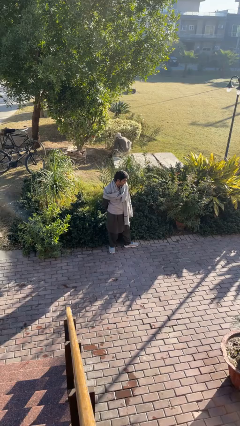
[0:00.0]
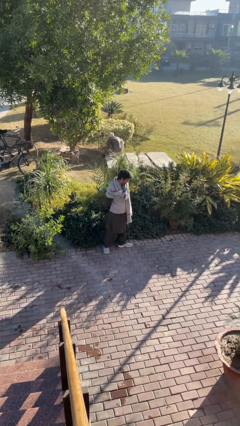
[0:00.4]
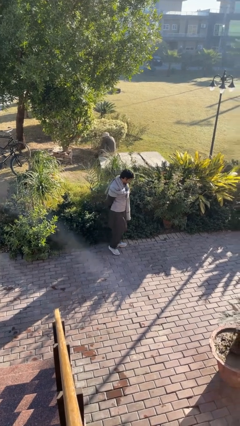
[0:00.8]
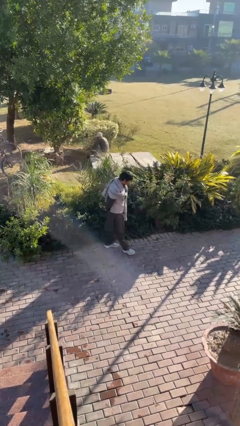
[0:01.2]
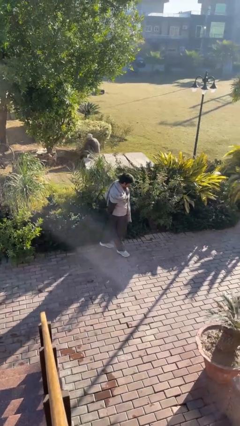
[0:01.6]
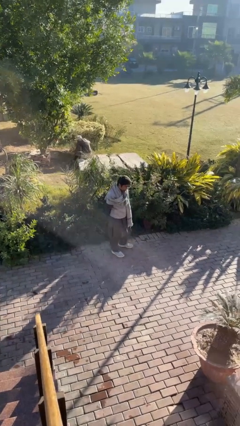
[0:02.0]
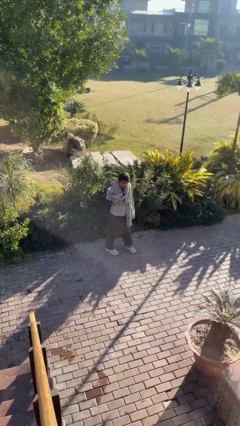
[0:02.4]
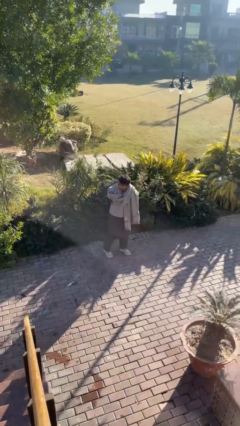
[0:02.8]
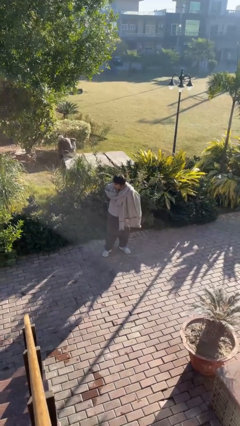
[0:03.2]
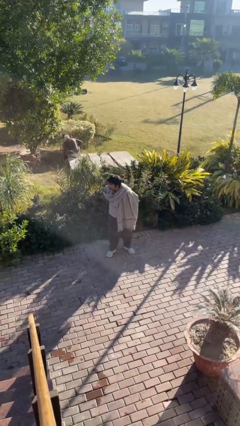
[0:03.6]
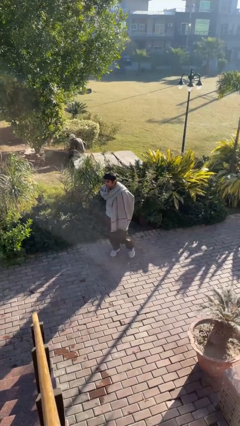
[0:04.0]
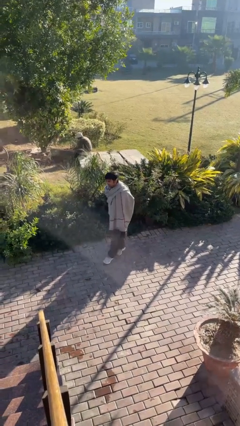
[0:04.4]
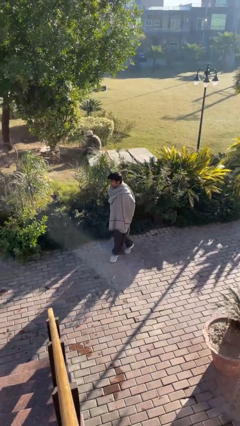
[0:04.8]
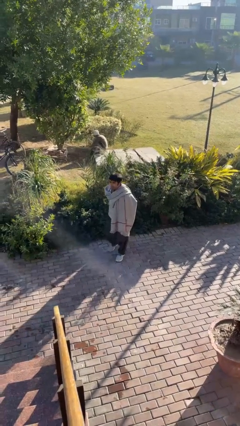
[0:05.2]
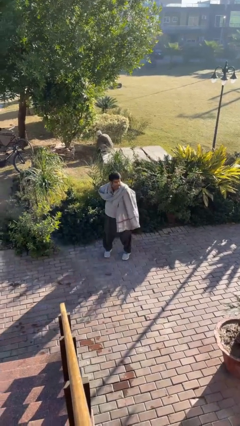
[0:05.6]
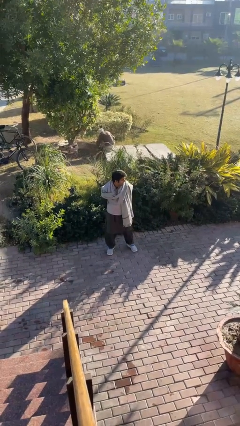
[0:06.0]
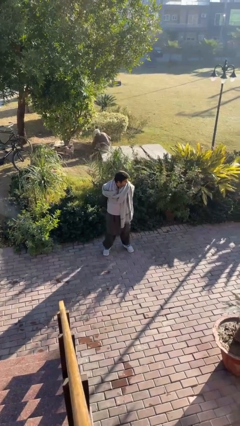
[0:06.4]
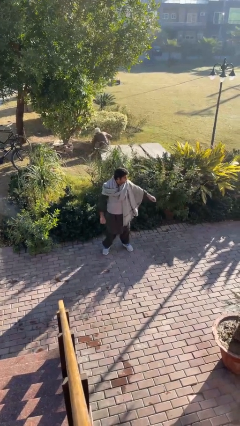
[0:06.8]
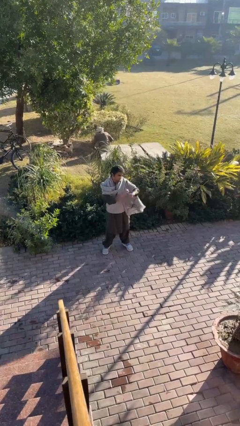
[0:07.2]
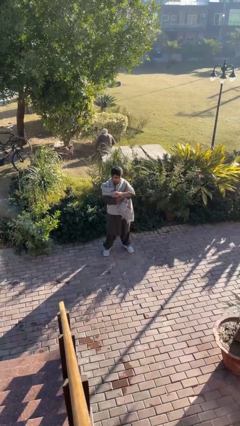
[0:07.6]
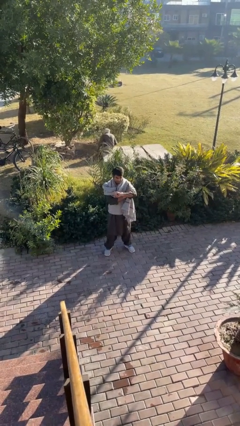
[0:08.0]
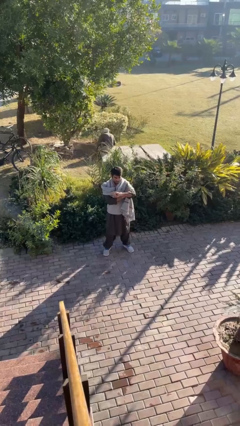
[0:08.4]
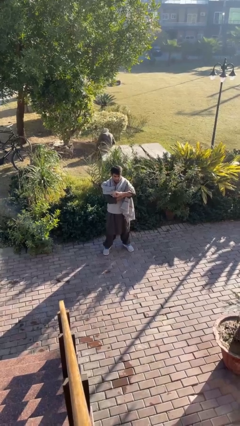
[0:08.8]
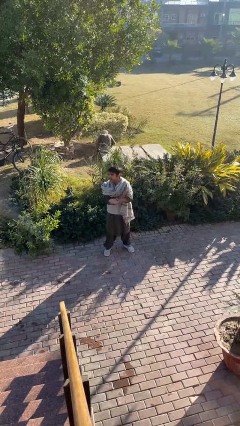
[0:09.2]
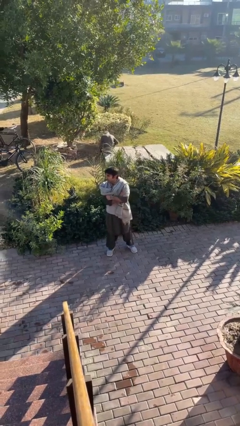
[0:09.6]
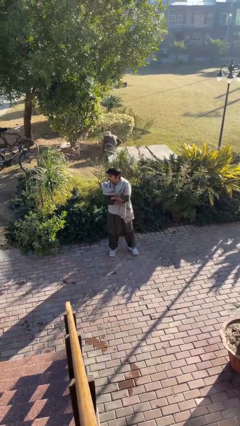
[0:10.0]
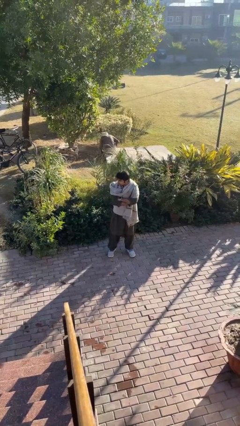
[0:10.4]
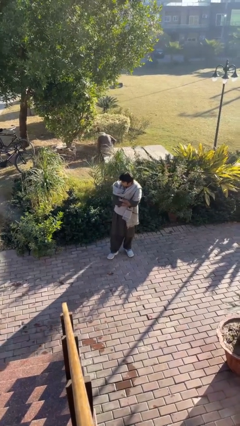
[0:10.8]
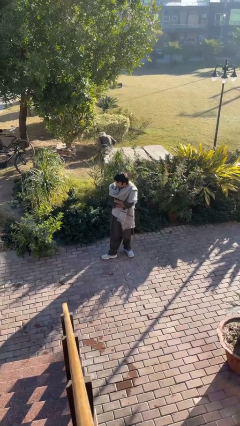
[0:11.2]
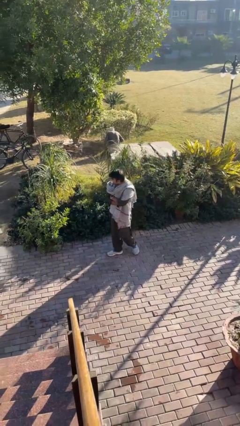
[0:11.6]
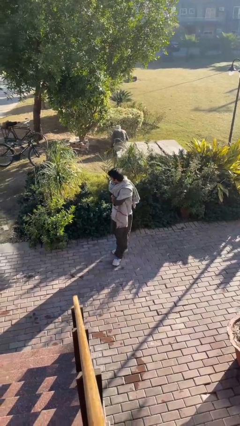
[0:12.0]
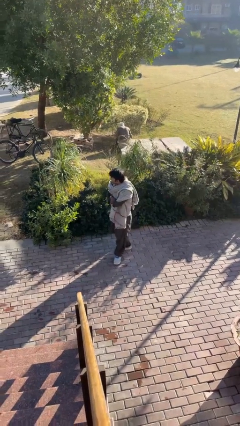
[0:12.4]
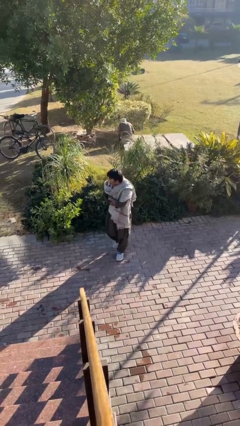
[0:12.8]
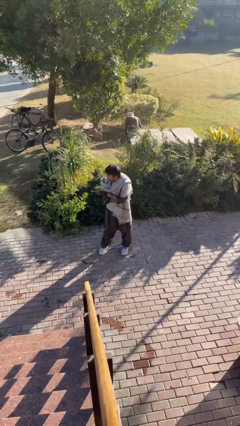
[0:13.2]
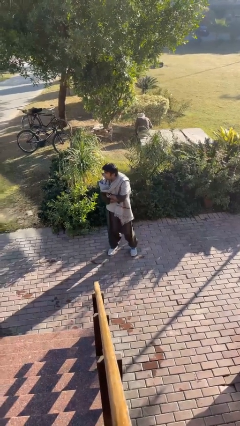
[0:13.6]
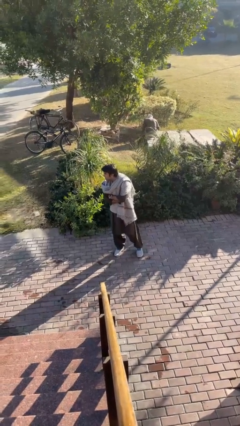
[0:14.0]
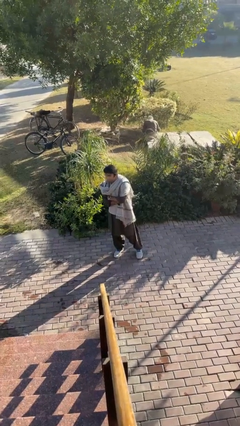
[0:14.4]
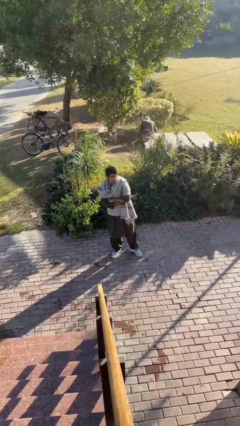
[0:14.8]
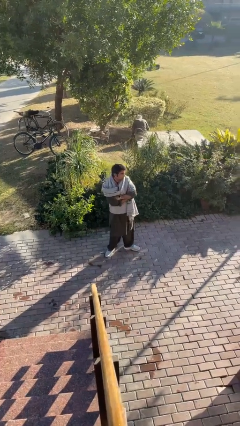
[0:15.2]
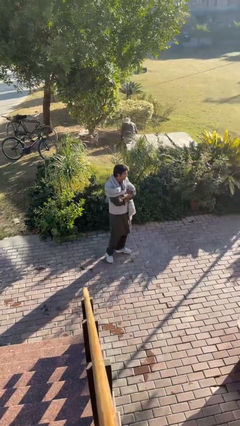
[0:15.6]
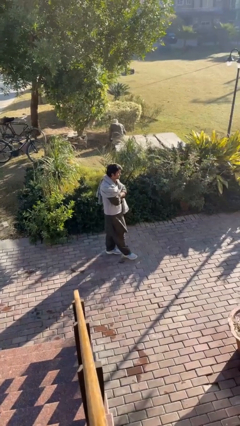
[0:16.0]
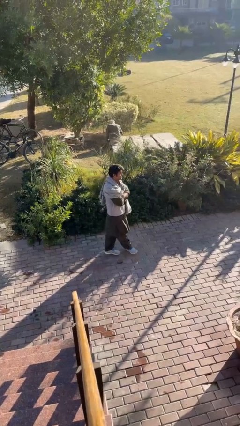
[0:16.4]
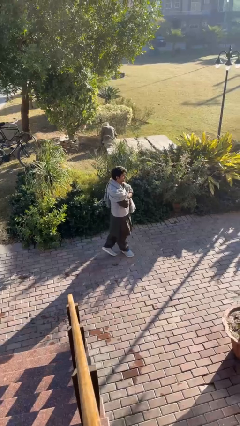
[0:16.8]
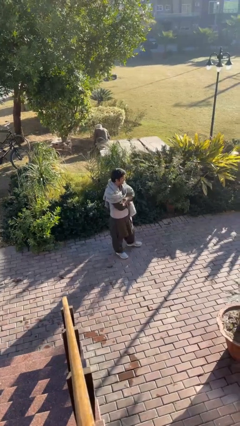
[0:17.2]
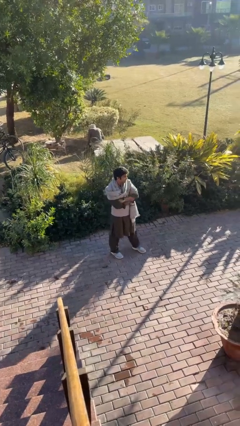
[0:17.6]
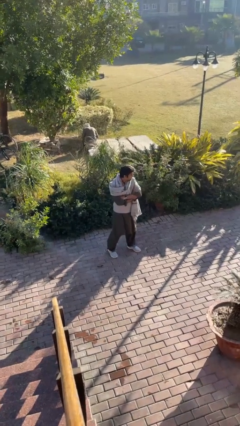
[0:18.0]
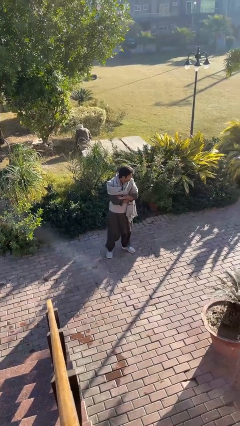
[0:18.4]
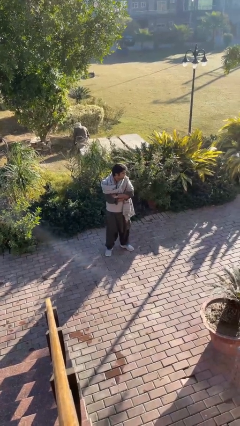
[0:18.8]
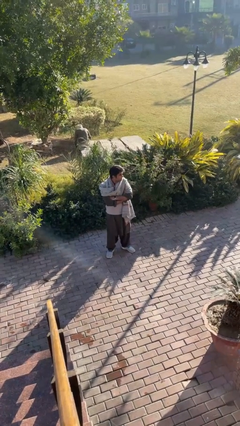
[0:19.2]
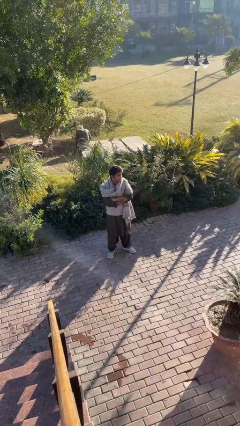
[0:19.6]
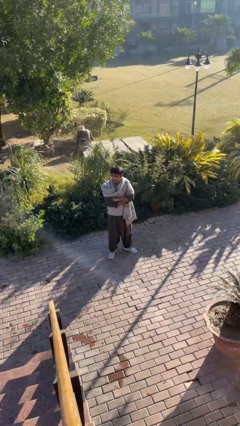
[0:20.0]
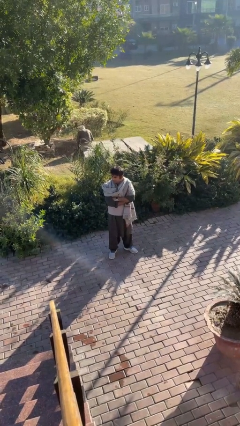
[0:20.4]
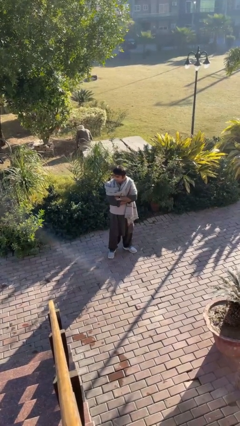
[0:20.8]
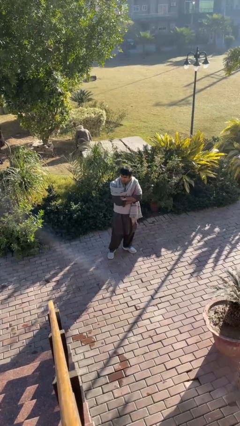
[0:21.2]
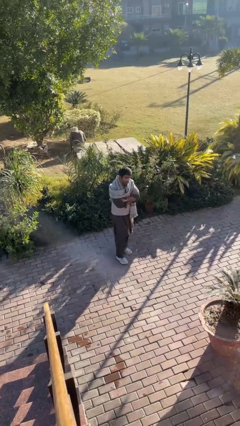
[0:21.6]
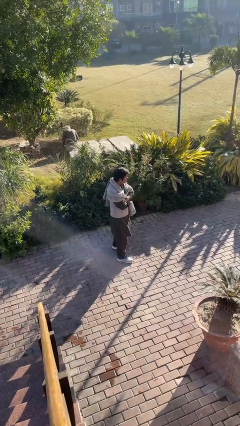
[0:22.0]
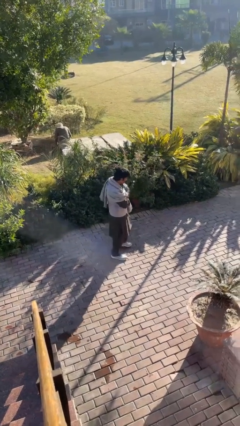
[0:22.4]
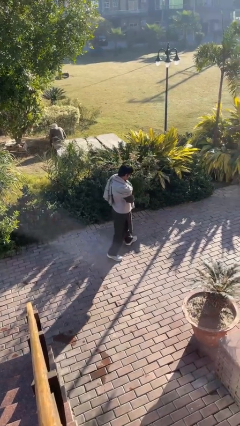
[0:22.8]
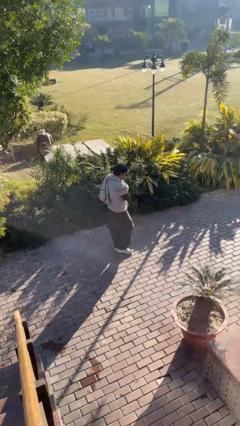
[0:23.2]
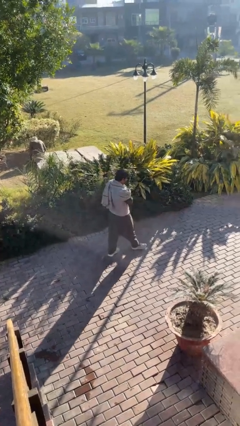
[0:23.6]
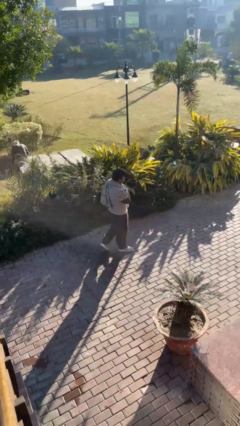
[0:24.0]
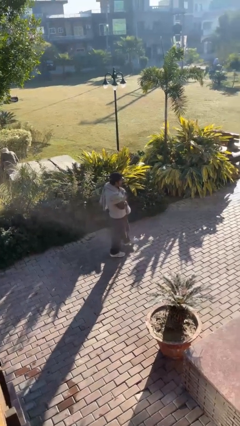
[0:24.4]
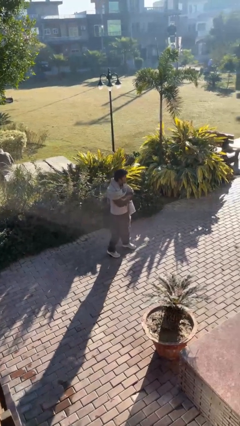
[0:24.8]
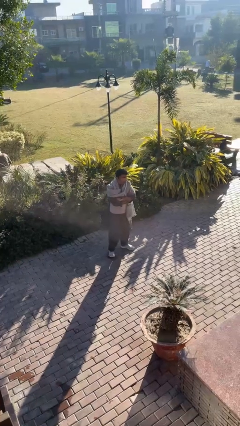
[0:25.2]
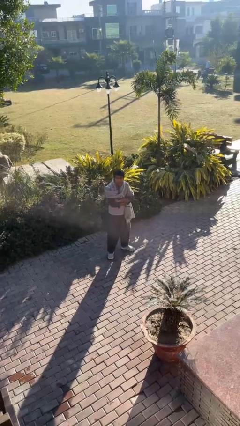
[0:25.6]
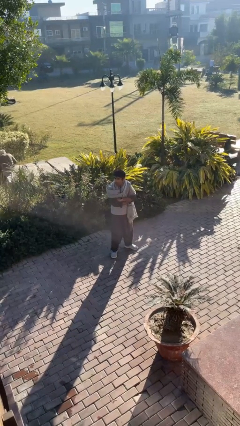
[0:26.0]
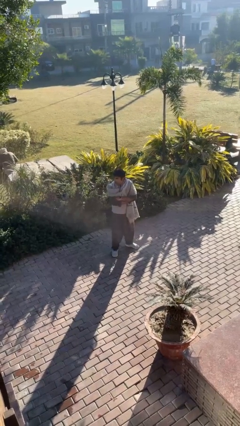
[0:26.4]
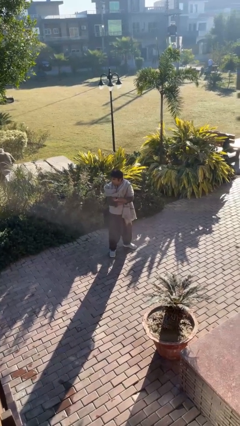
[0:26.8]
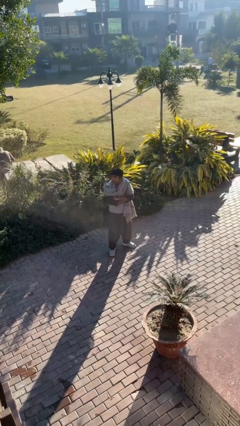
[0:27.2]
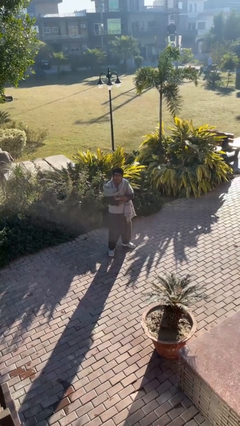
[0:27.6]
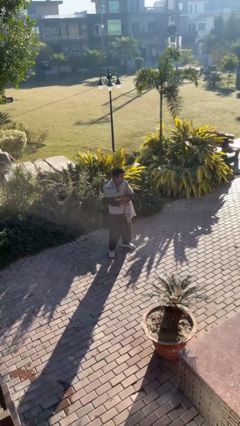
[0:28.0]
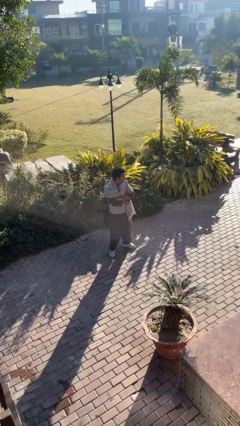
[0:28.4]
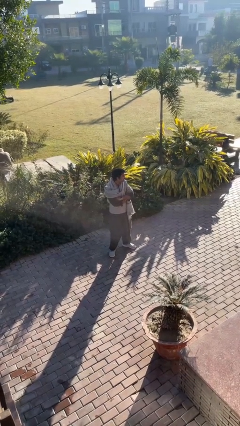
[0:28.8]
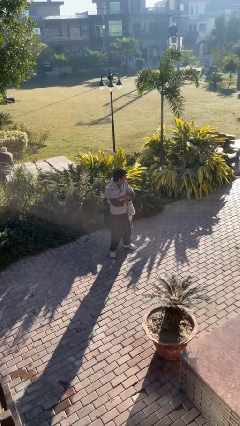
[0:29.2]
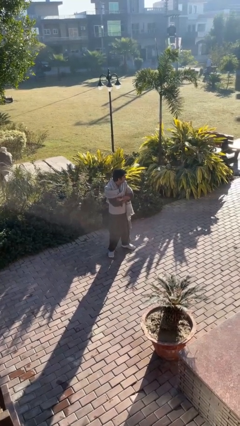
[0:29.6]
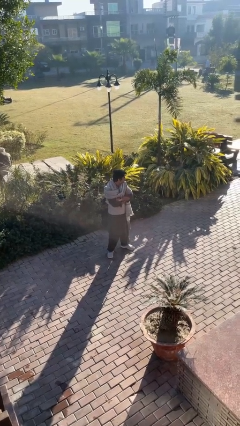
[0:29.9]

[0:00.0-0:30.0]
person walks

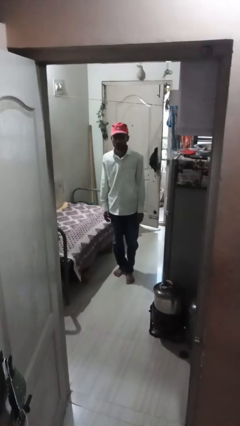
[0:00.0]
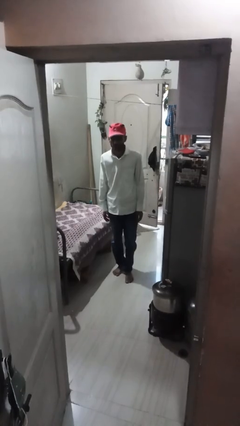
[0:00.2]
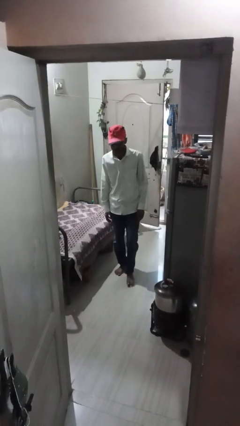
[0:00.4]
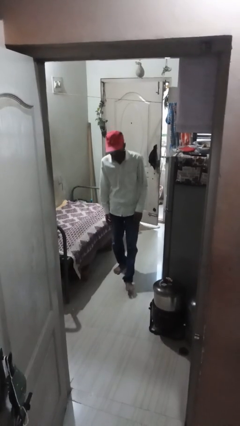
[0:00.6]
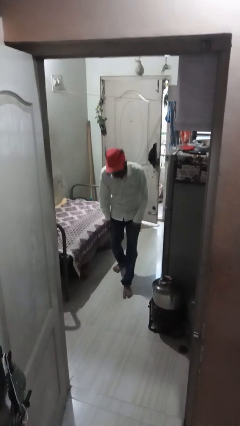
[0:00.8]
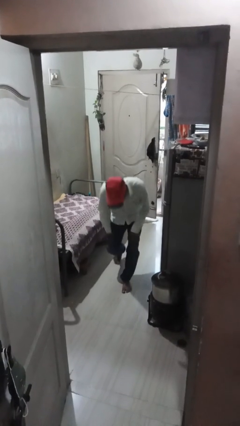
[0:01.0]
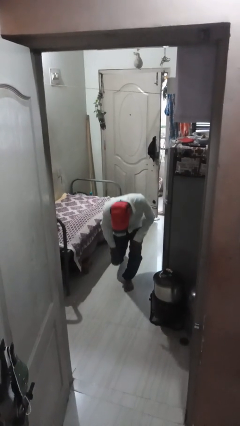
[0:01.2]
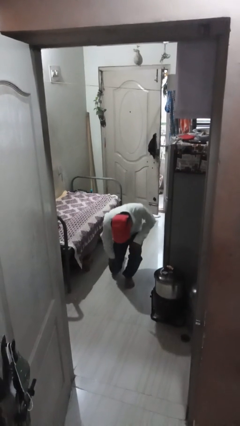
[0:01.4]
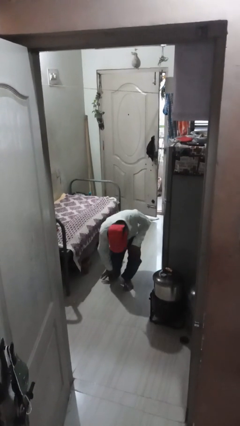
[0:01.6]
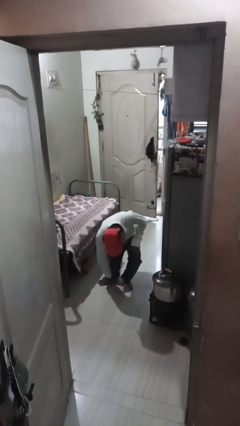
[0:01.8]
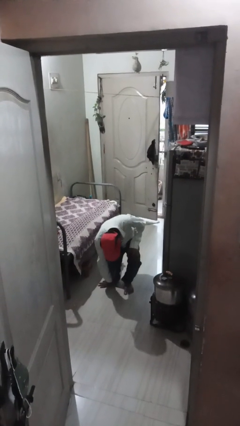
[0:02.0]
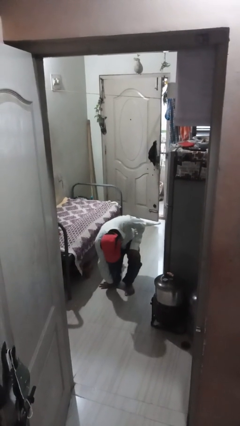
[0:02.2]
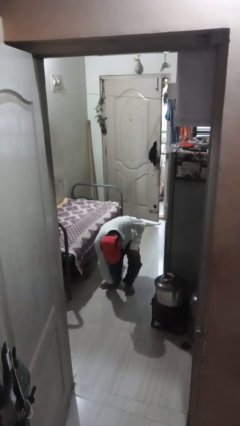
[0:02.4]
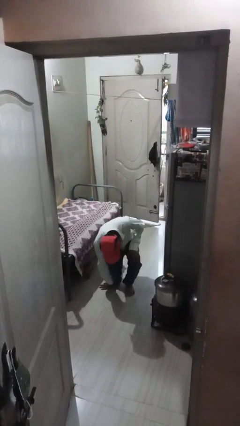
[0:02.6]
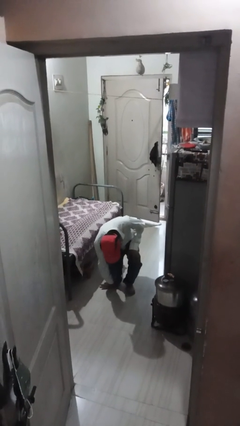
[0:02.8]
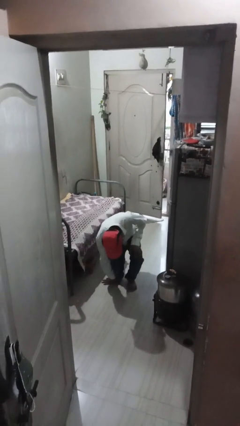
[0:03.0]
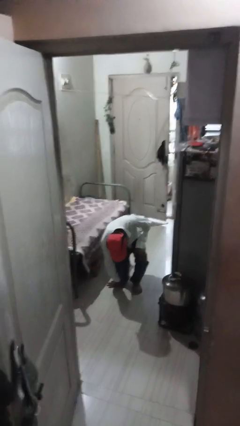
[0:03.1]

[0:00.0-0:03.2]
person kneels
